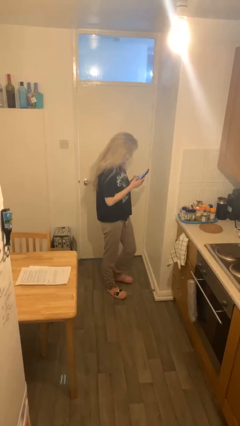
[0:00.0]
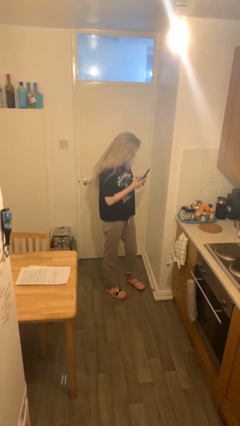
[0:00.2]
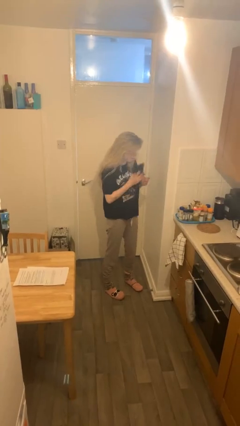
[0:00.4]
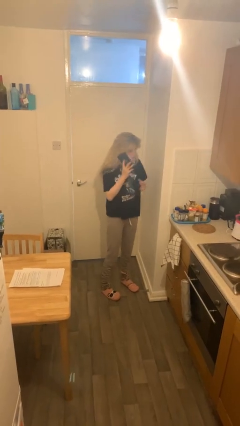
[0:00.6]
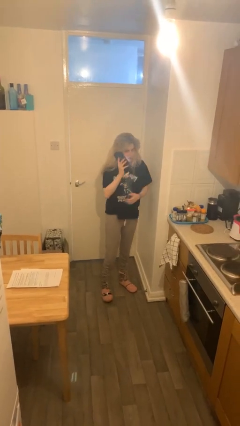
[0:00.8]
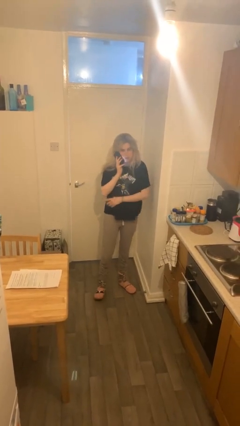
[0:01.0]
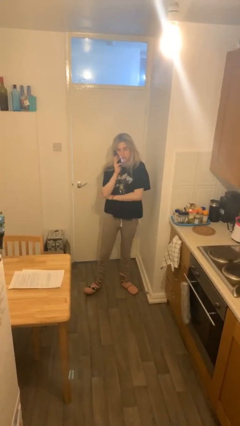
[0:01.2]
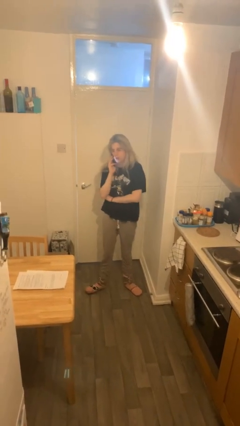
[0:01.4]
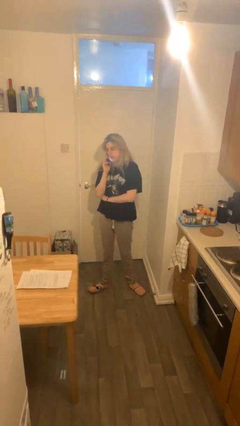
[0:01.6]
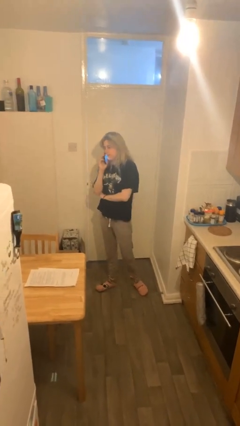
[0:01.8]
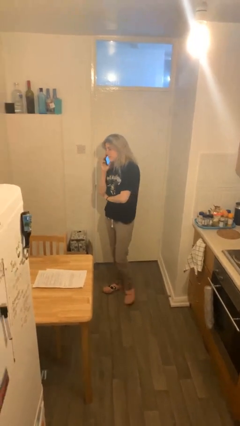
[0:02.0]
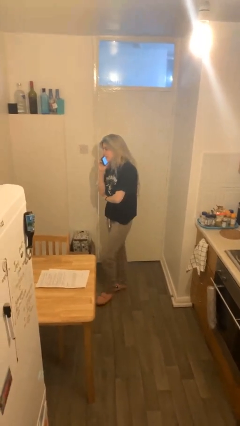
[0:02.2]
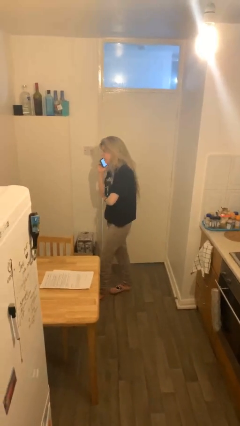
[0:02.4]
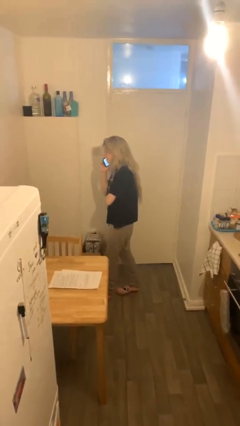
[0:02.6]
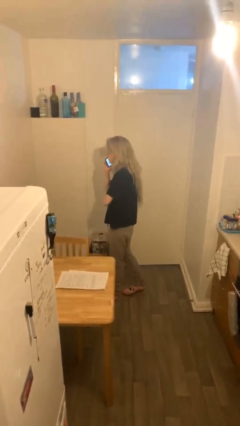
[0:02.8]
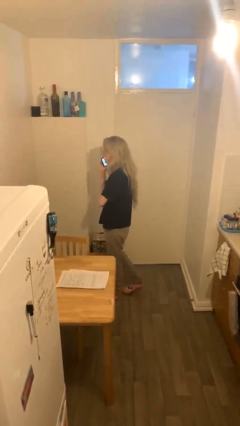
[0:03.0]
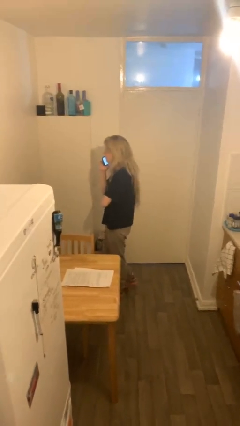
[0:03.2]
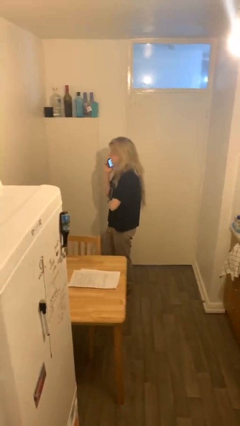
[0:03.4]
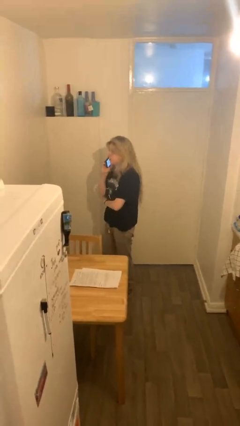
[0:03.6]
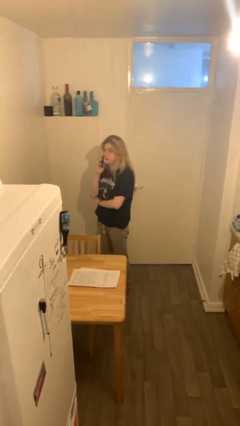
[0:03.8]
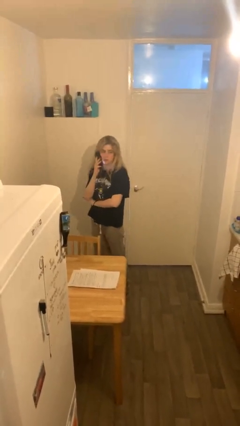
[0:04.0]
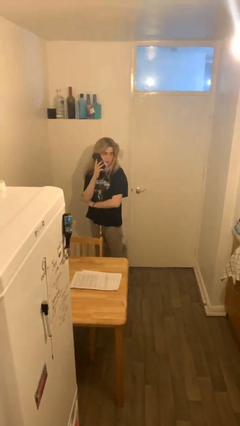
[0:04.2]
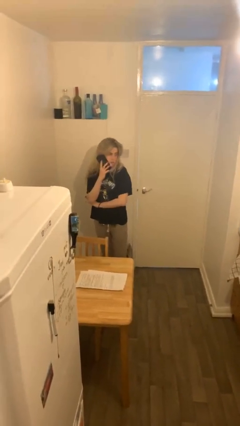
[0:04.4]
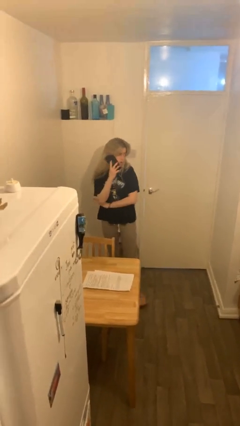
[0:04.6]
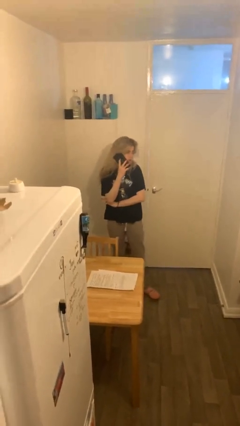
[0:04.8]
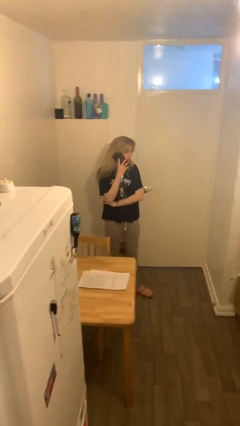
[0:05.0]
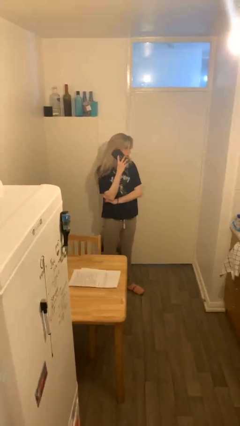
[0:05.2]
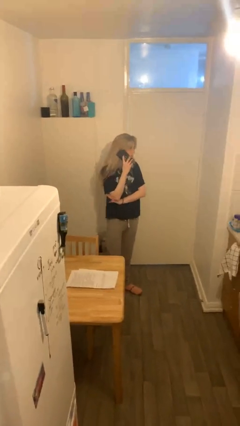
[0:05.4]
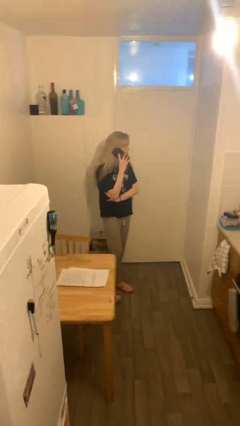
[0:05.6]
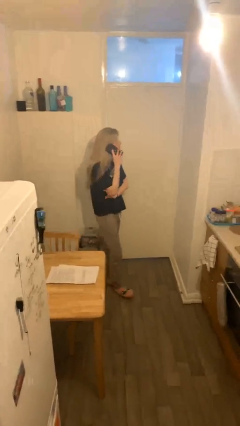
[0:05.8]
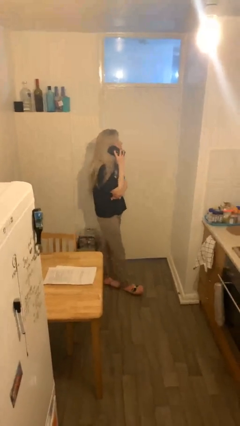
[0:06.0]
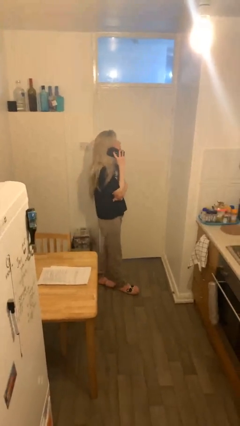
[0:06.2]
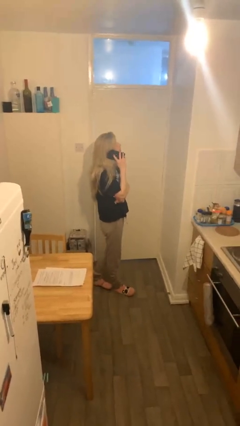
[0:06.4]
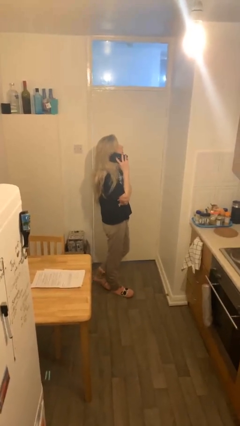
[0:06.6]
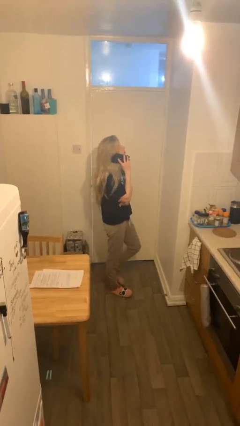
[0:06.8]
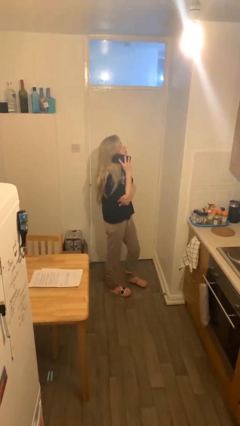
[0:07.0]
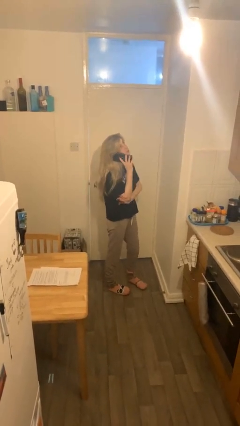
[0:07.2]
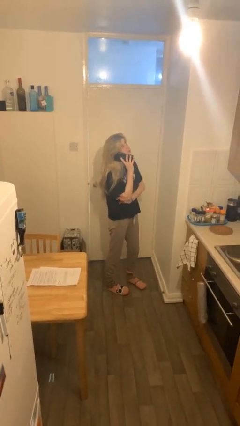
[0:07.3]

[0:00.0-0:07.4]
person talks on phone

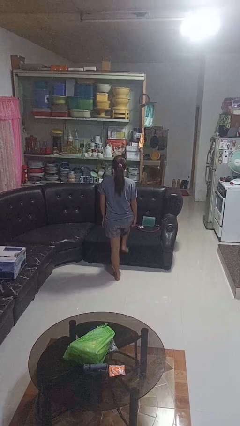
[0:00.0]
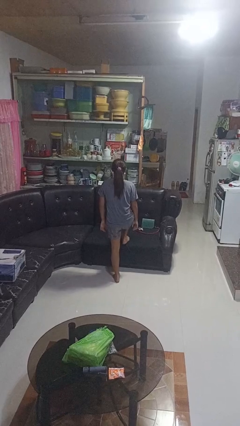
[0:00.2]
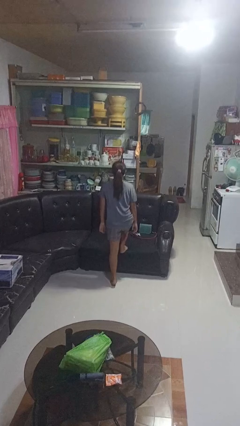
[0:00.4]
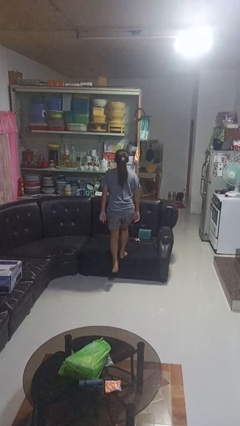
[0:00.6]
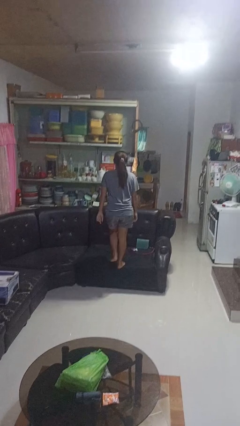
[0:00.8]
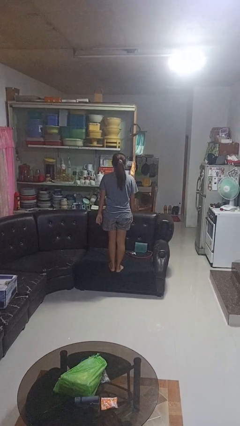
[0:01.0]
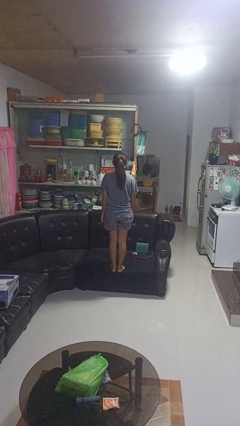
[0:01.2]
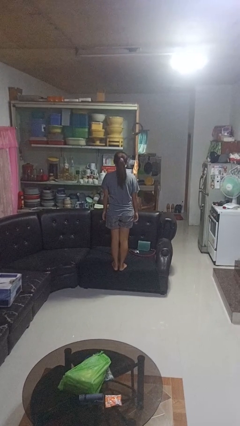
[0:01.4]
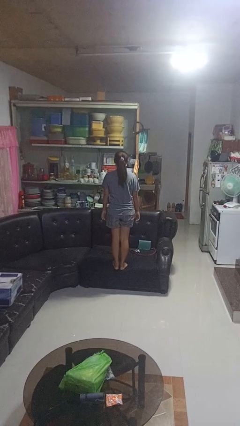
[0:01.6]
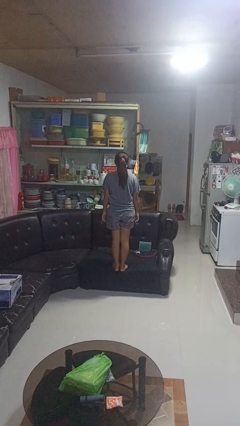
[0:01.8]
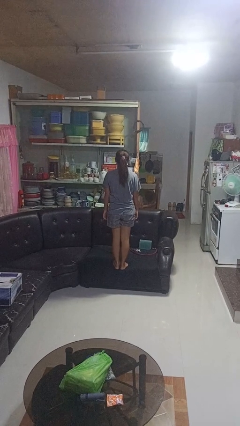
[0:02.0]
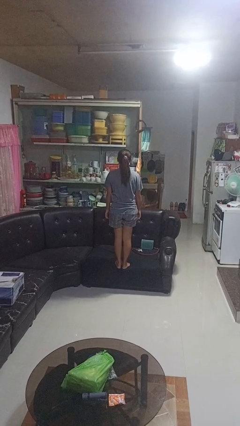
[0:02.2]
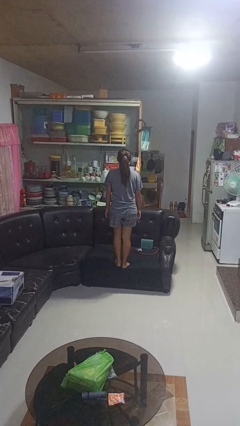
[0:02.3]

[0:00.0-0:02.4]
person climbs on couch

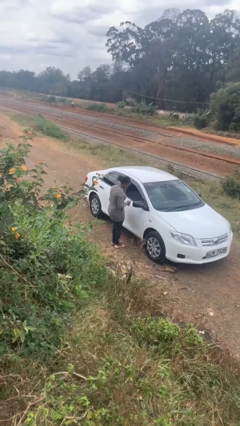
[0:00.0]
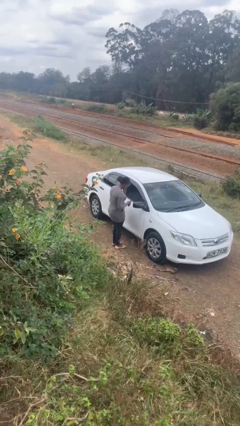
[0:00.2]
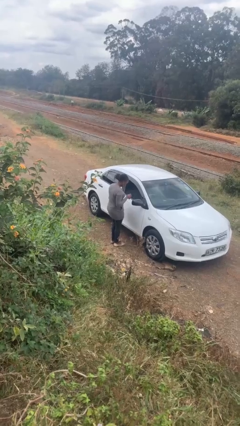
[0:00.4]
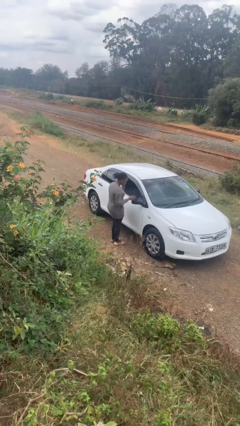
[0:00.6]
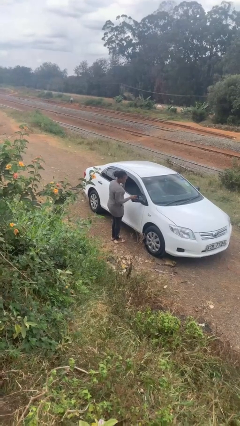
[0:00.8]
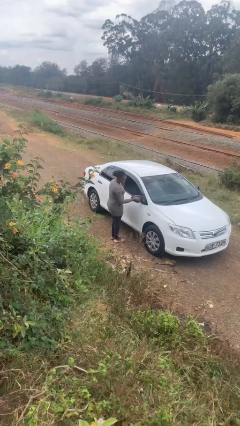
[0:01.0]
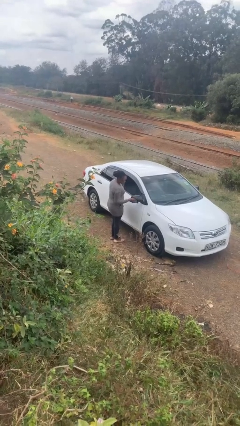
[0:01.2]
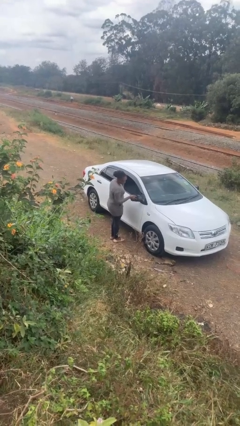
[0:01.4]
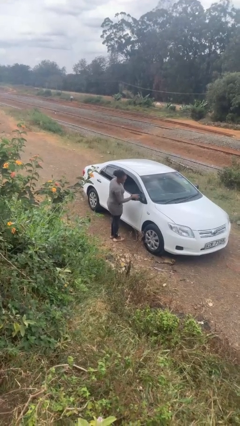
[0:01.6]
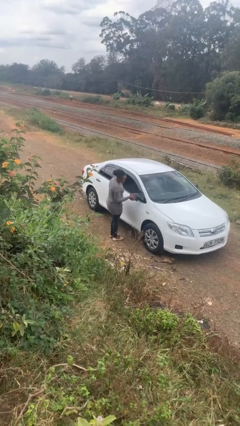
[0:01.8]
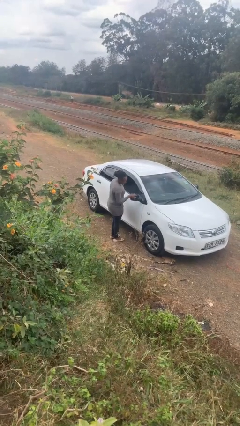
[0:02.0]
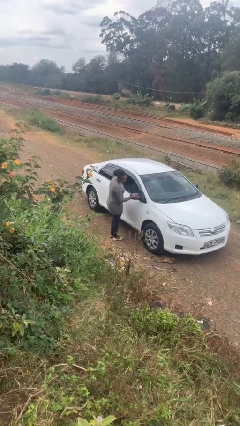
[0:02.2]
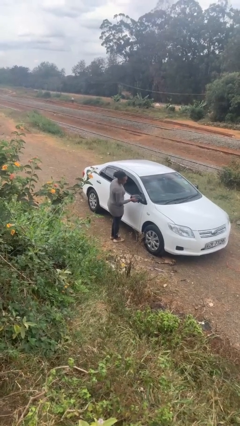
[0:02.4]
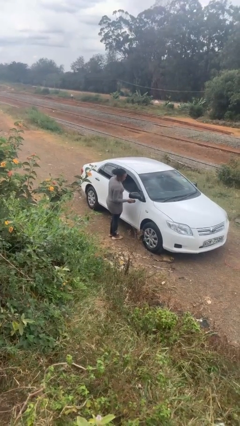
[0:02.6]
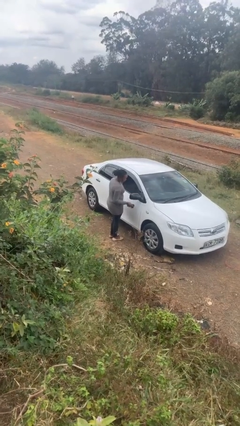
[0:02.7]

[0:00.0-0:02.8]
person polishes car with rag

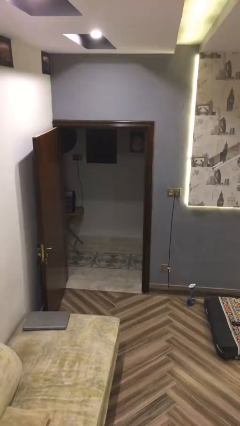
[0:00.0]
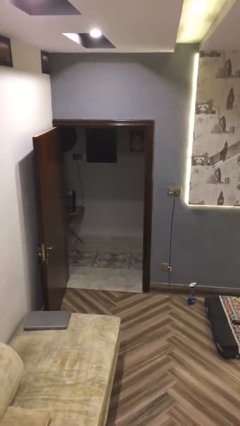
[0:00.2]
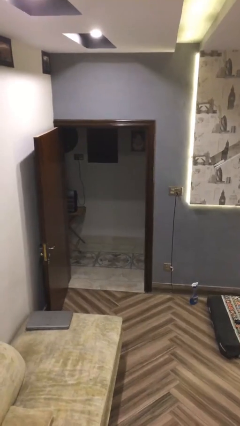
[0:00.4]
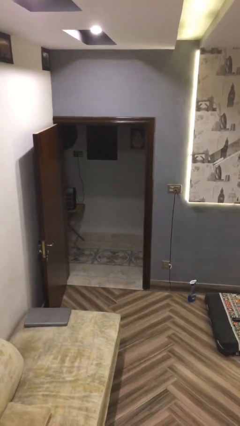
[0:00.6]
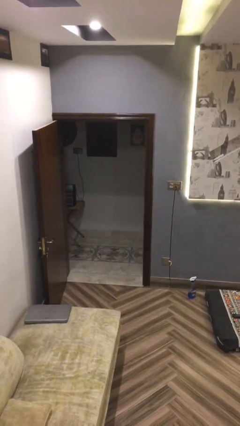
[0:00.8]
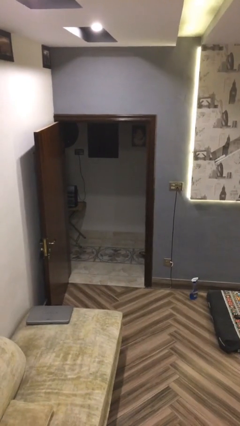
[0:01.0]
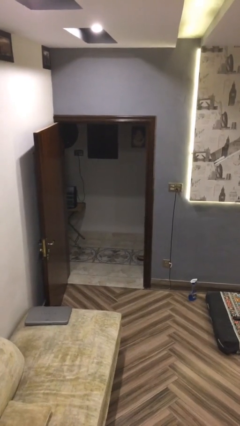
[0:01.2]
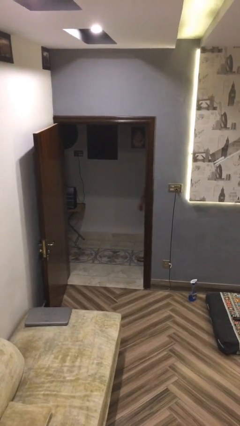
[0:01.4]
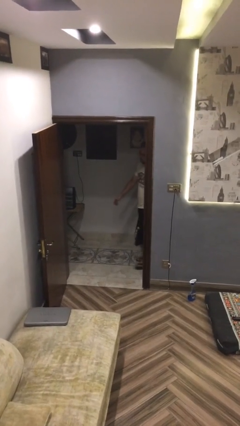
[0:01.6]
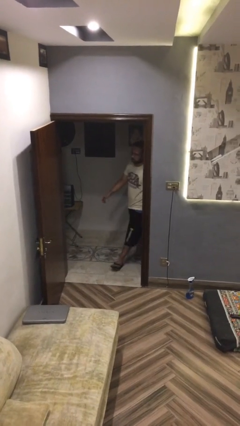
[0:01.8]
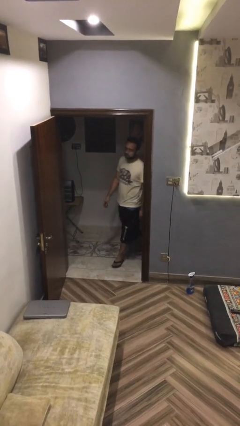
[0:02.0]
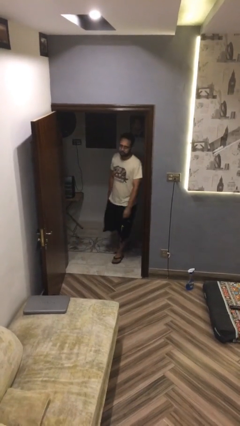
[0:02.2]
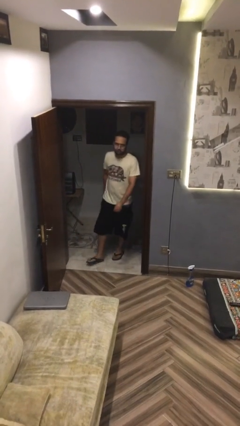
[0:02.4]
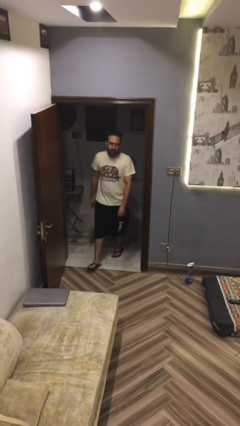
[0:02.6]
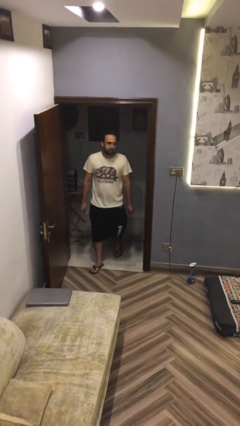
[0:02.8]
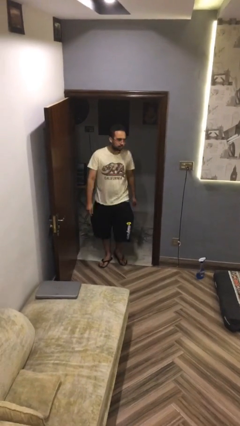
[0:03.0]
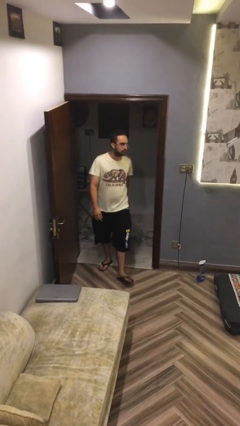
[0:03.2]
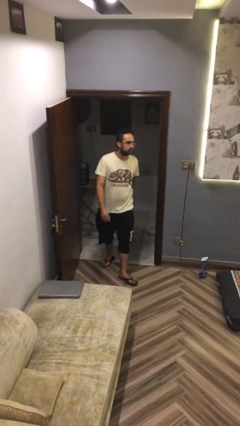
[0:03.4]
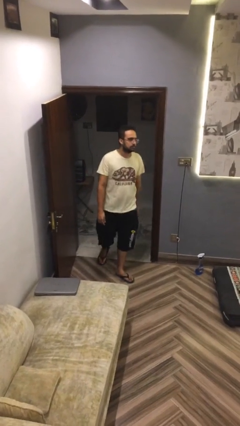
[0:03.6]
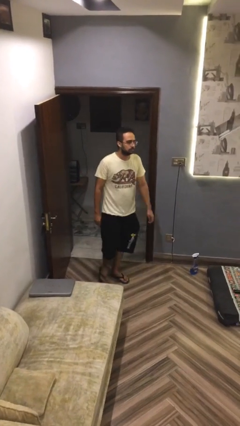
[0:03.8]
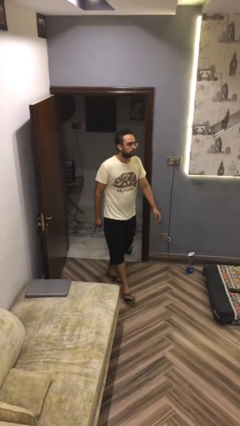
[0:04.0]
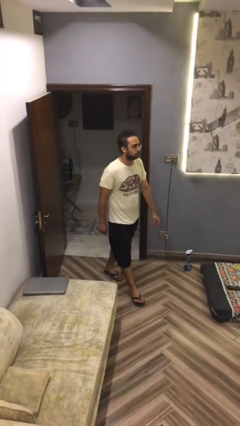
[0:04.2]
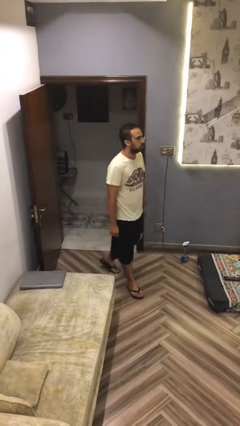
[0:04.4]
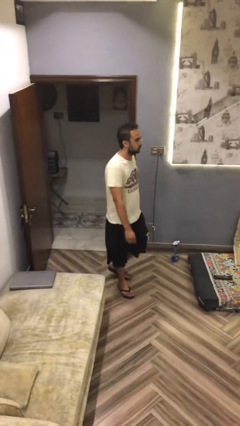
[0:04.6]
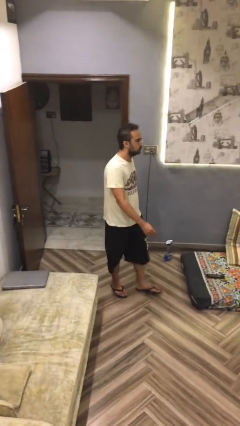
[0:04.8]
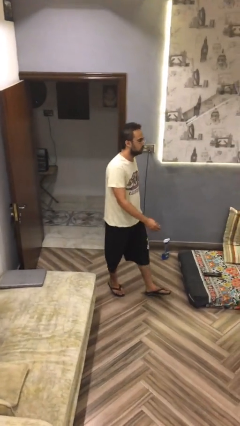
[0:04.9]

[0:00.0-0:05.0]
person enters scene through structure
